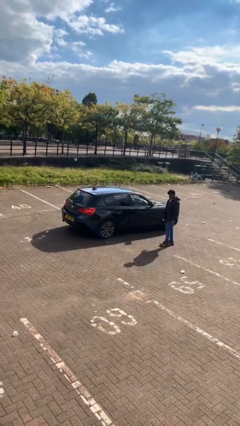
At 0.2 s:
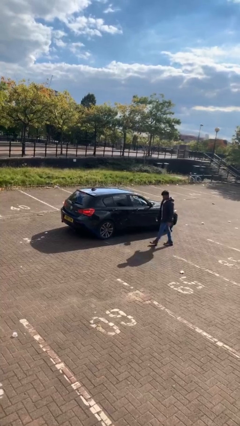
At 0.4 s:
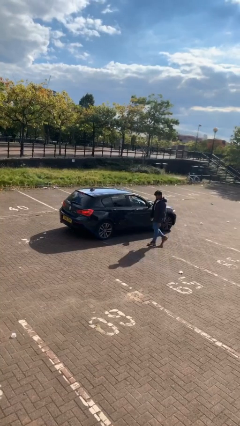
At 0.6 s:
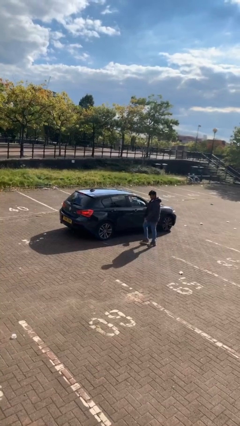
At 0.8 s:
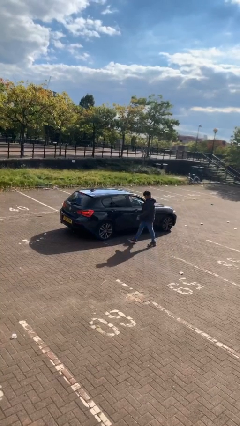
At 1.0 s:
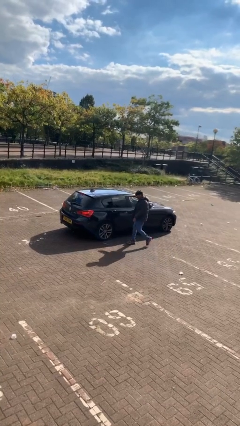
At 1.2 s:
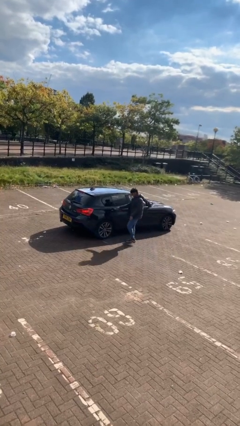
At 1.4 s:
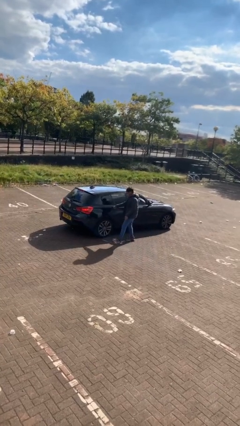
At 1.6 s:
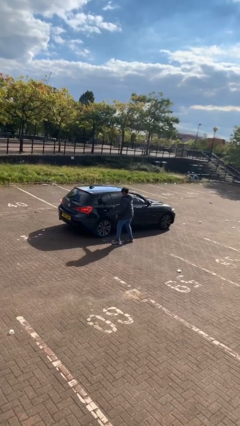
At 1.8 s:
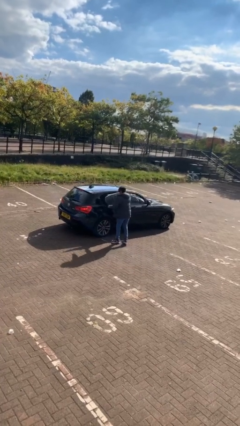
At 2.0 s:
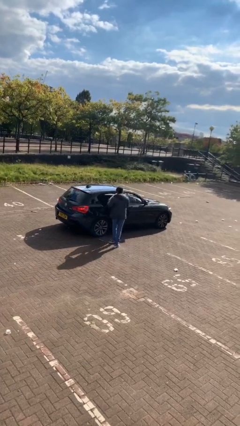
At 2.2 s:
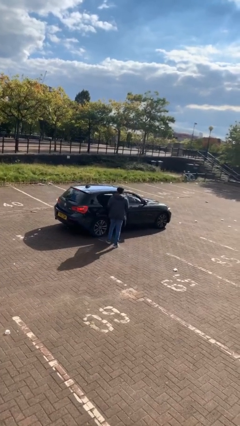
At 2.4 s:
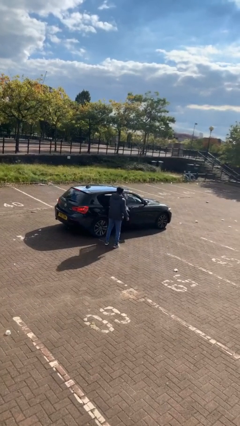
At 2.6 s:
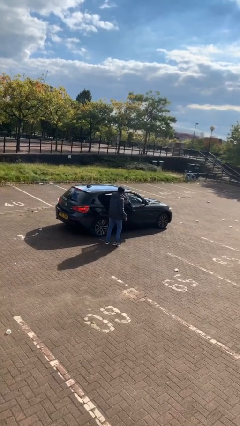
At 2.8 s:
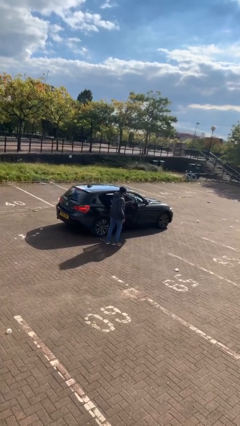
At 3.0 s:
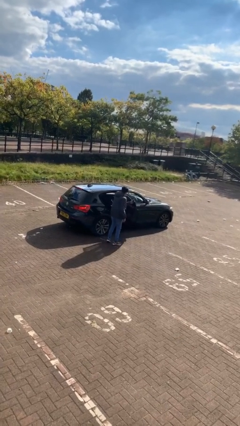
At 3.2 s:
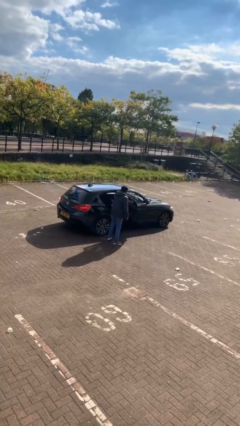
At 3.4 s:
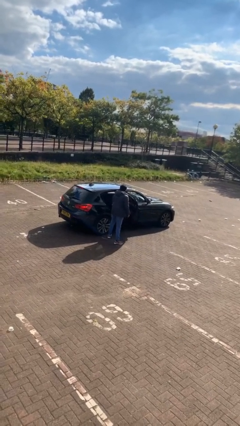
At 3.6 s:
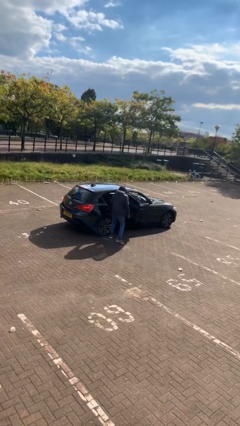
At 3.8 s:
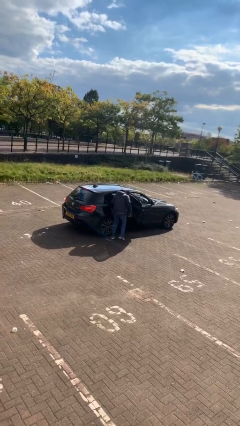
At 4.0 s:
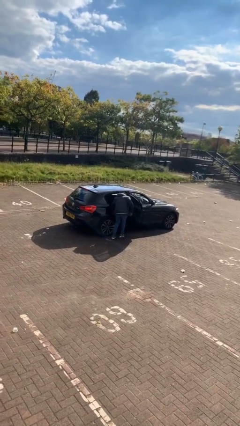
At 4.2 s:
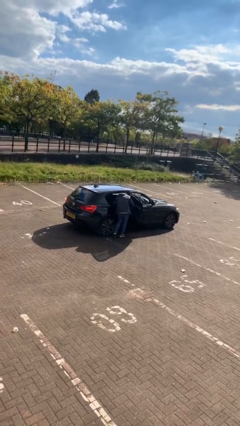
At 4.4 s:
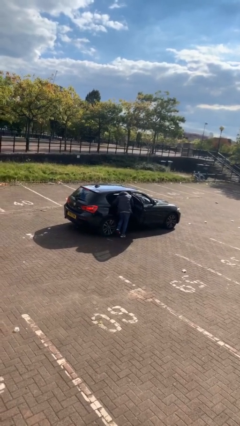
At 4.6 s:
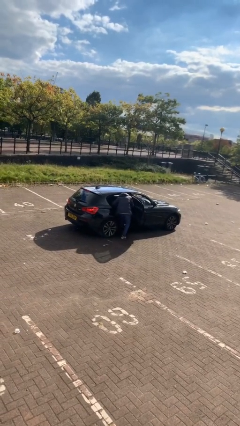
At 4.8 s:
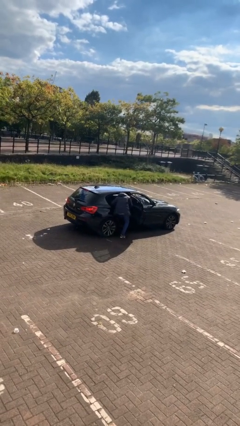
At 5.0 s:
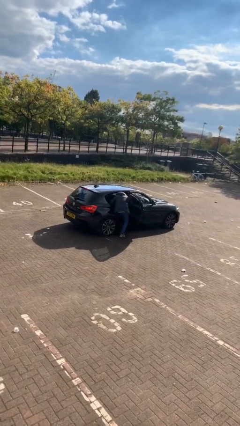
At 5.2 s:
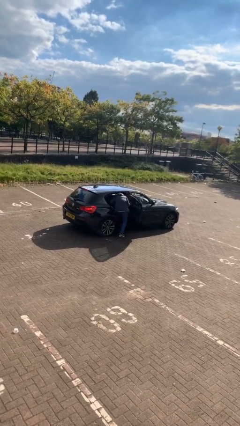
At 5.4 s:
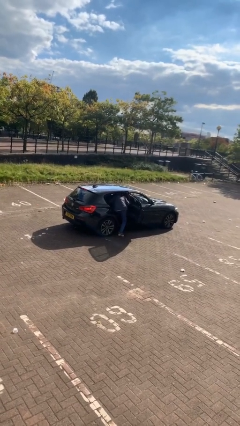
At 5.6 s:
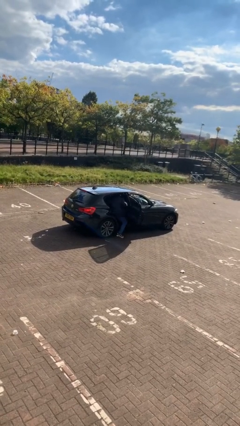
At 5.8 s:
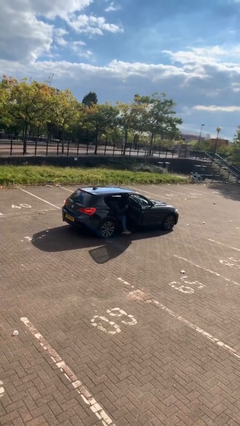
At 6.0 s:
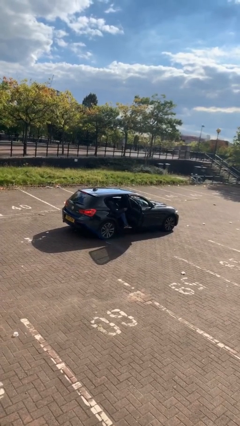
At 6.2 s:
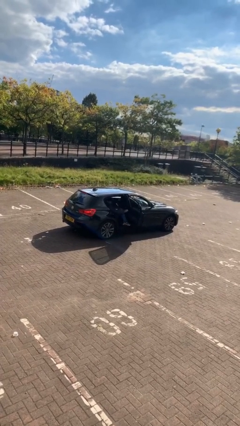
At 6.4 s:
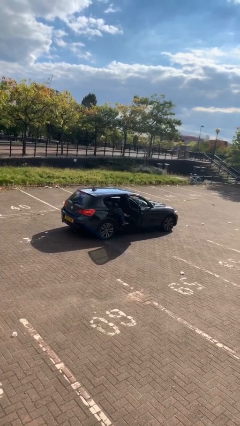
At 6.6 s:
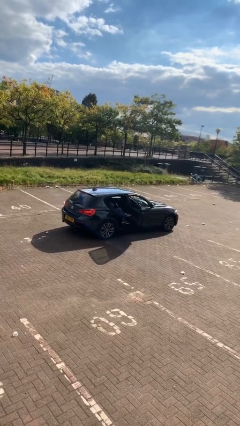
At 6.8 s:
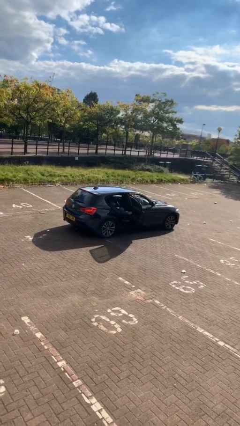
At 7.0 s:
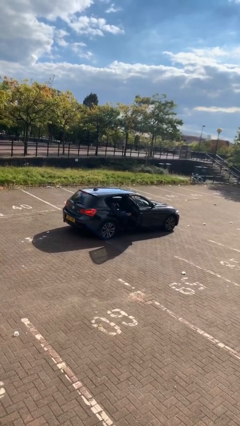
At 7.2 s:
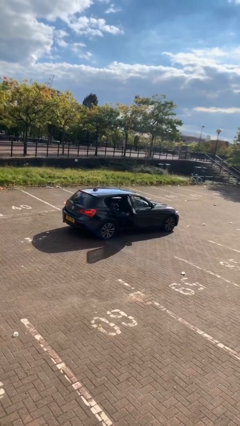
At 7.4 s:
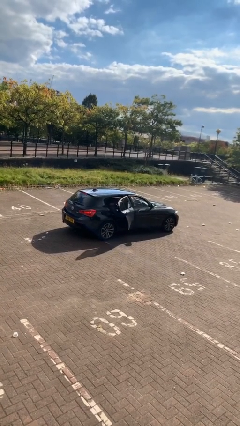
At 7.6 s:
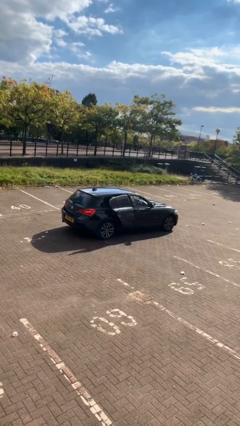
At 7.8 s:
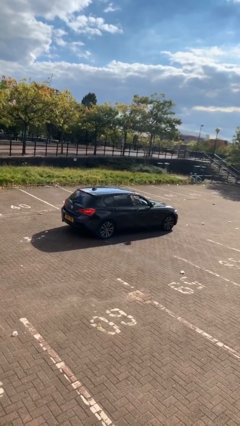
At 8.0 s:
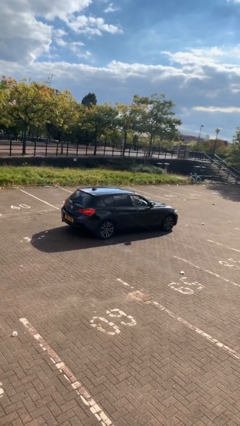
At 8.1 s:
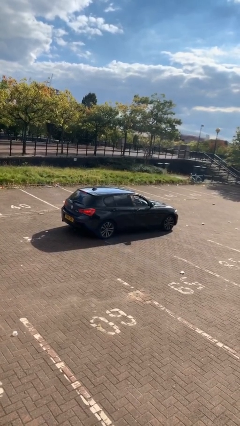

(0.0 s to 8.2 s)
car picks up person

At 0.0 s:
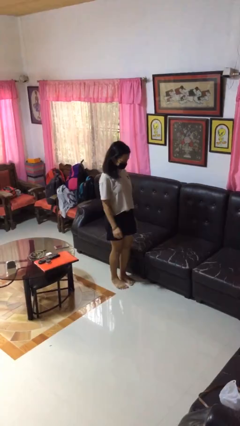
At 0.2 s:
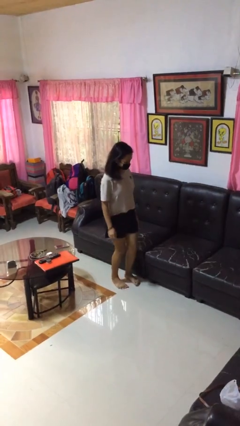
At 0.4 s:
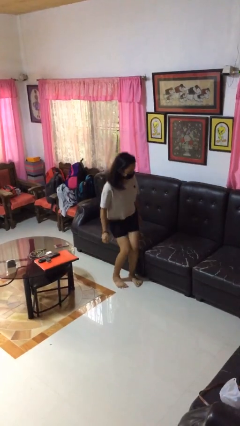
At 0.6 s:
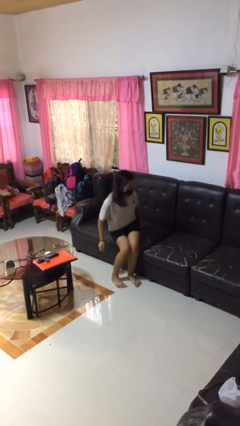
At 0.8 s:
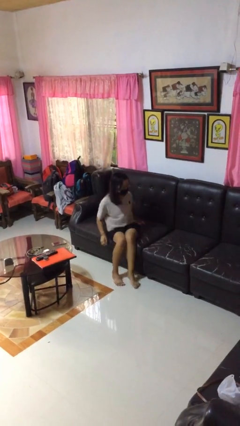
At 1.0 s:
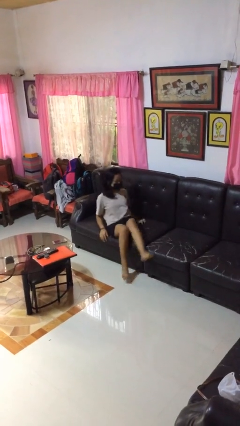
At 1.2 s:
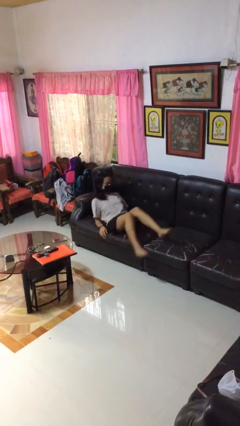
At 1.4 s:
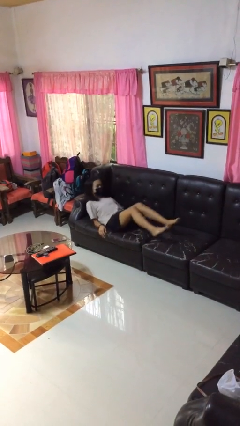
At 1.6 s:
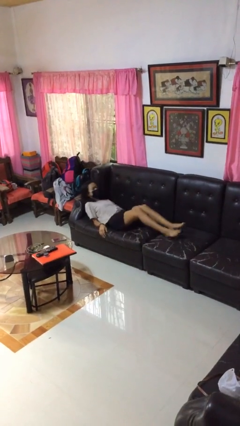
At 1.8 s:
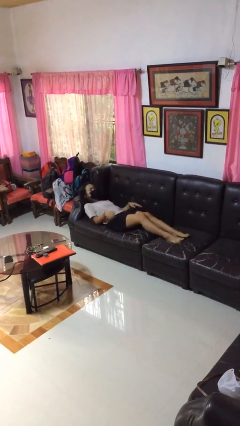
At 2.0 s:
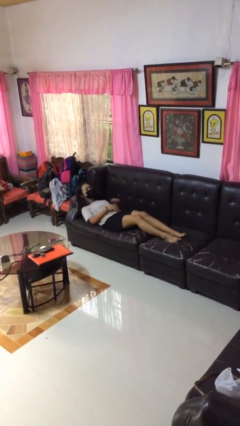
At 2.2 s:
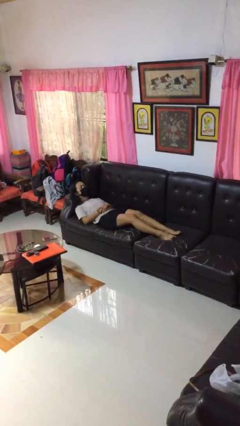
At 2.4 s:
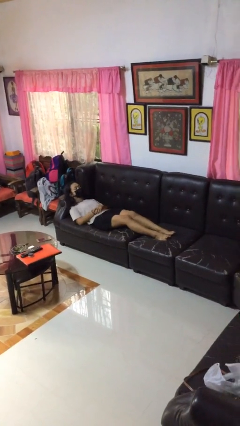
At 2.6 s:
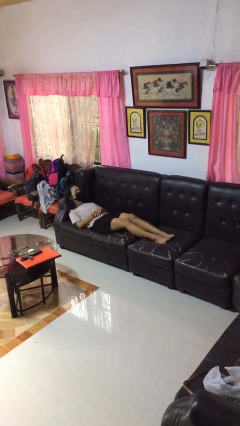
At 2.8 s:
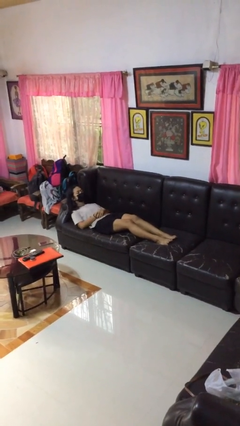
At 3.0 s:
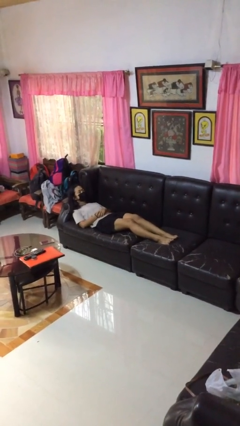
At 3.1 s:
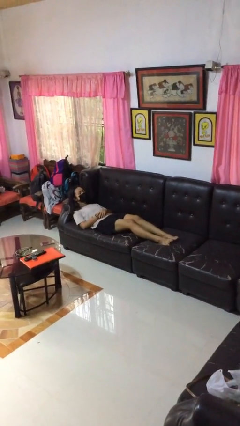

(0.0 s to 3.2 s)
person lies down on couch

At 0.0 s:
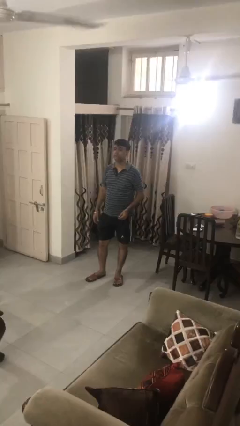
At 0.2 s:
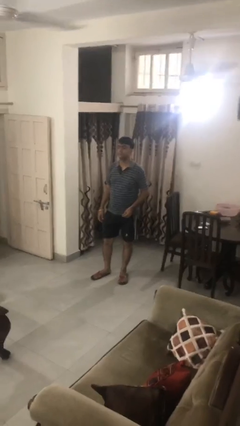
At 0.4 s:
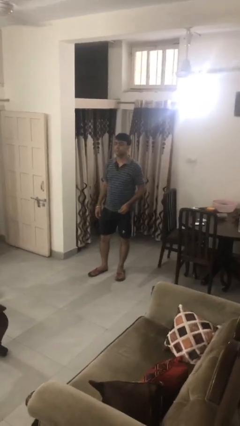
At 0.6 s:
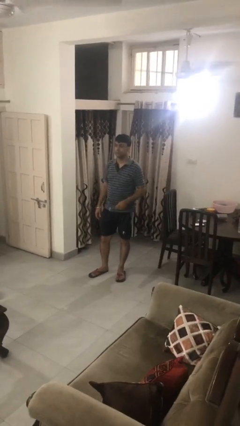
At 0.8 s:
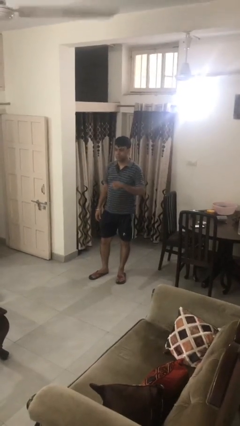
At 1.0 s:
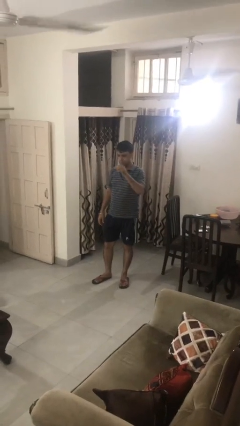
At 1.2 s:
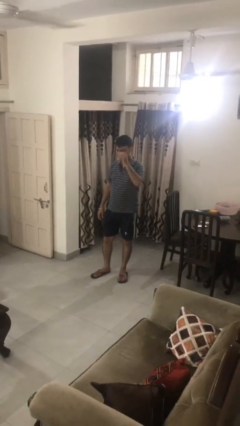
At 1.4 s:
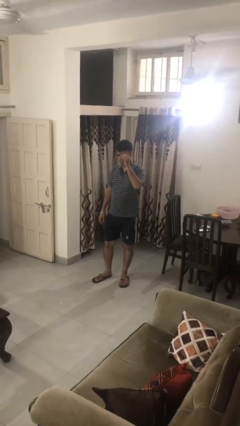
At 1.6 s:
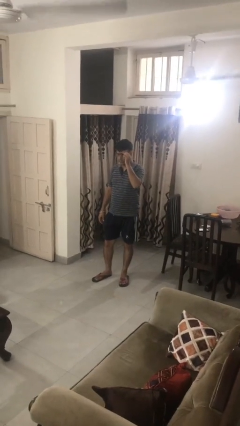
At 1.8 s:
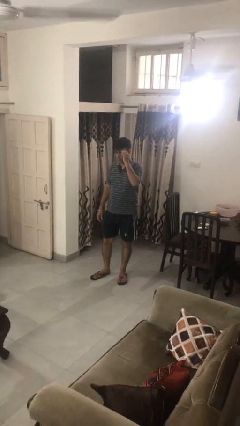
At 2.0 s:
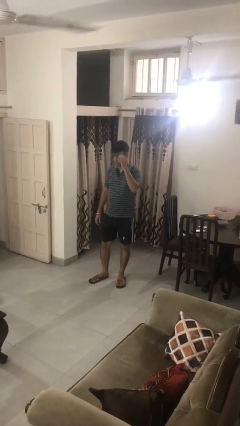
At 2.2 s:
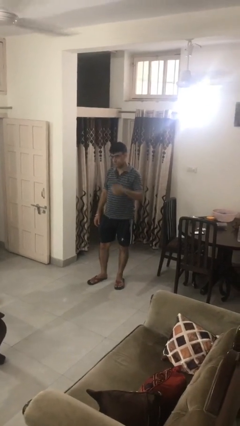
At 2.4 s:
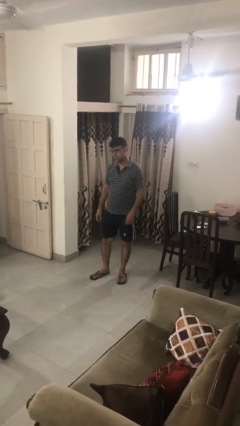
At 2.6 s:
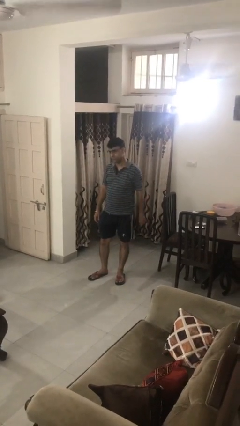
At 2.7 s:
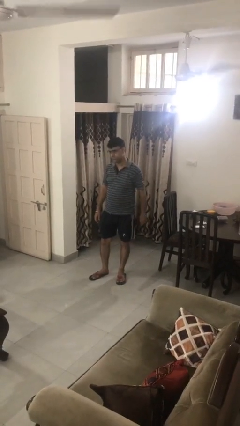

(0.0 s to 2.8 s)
person puts on glasses

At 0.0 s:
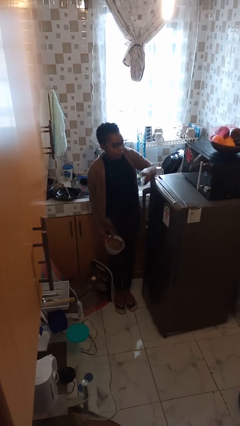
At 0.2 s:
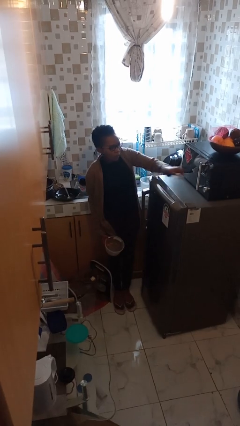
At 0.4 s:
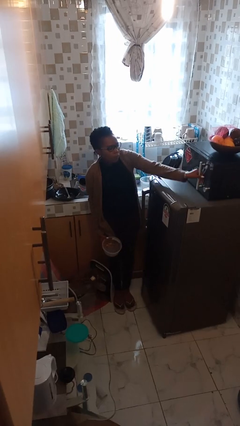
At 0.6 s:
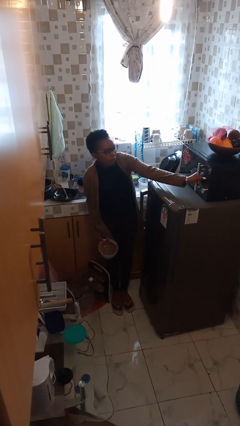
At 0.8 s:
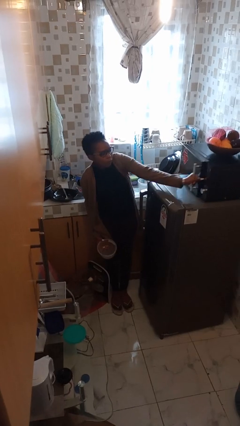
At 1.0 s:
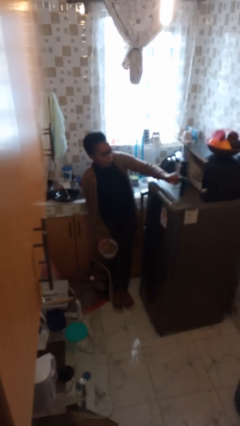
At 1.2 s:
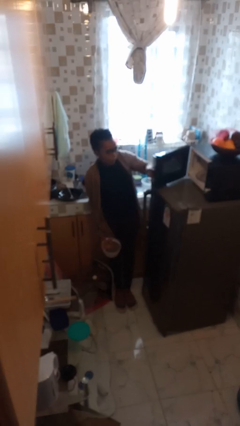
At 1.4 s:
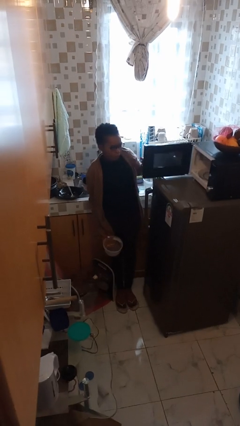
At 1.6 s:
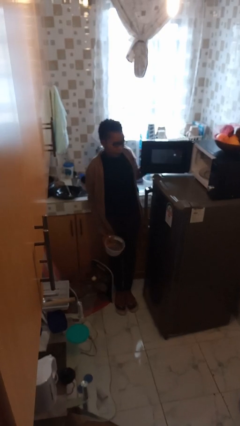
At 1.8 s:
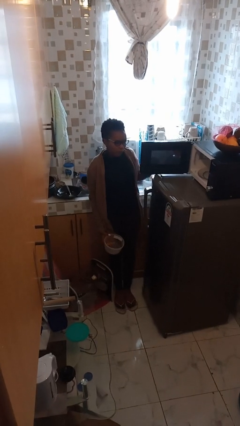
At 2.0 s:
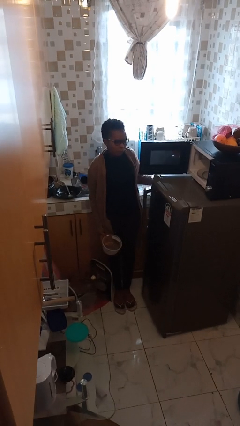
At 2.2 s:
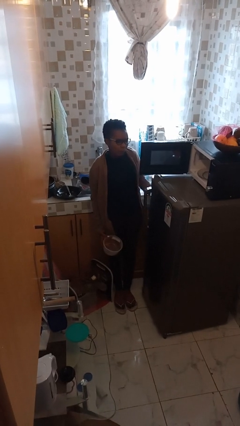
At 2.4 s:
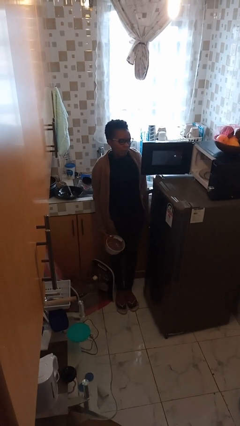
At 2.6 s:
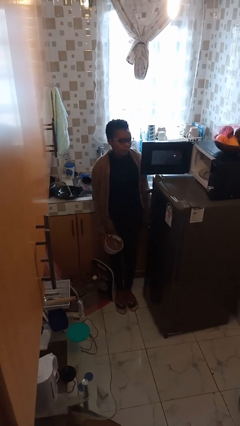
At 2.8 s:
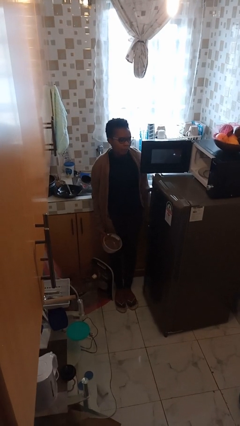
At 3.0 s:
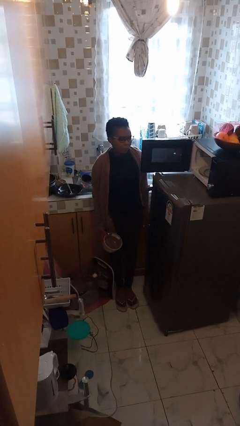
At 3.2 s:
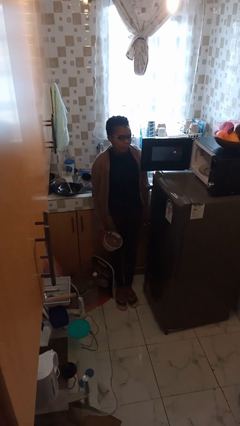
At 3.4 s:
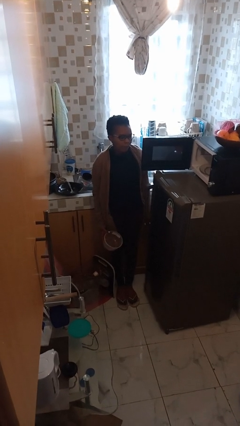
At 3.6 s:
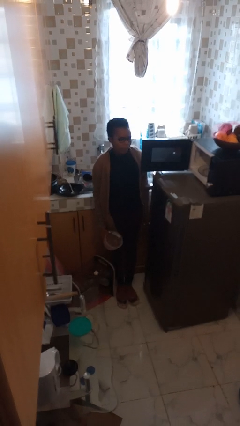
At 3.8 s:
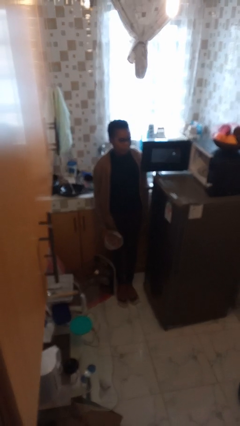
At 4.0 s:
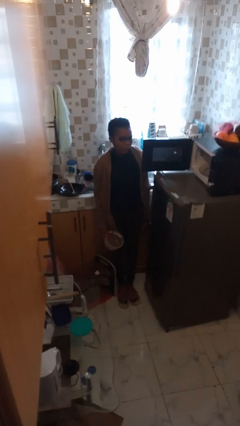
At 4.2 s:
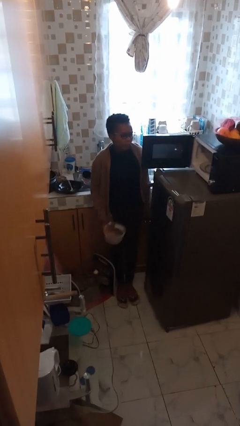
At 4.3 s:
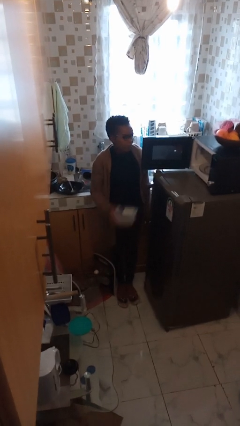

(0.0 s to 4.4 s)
person opens microwave
